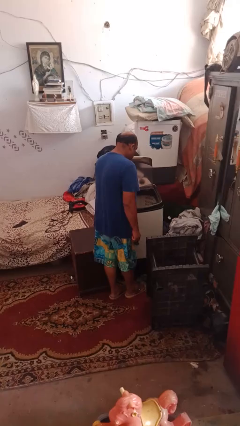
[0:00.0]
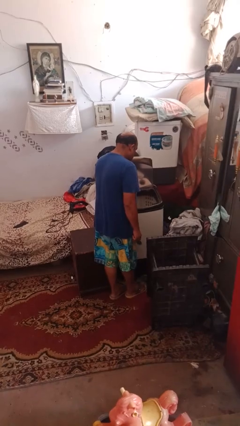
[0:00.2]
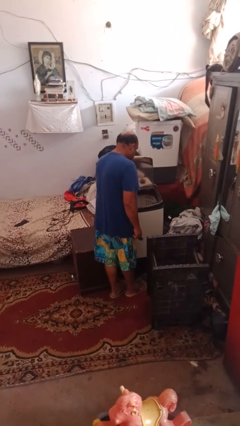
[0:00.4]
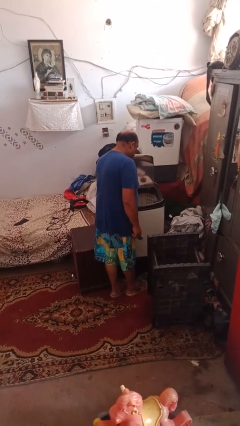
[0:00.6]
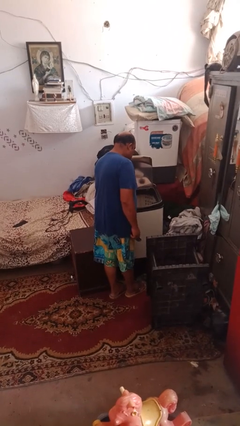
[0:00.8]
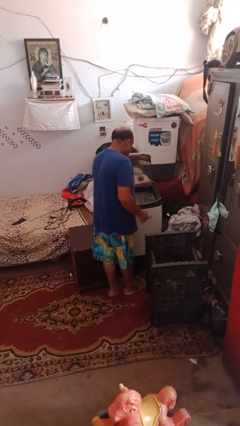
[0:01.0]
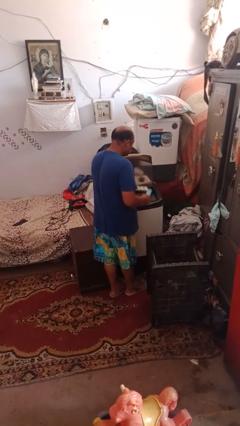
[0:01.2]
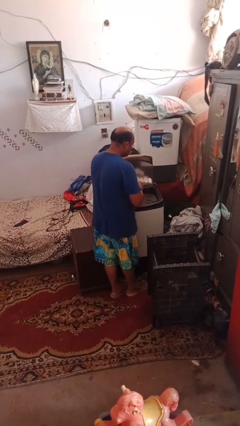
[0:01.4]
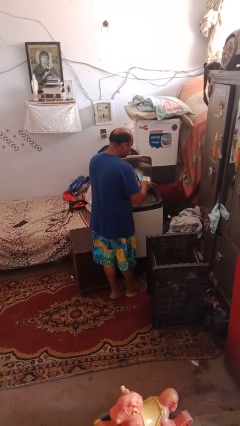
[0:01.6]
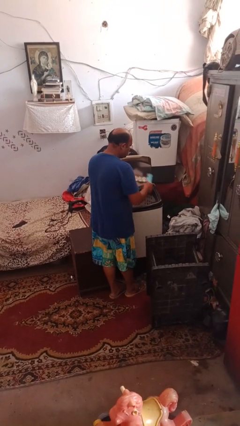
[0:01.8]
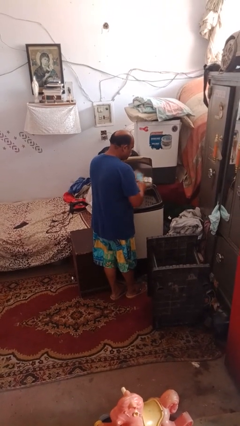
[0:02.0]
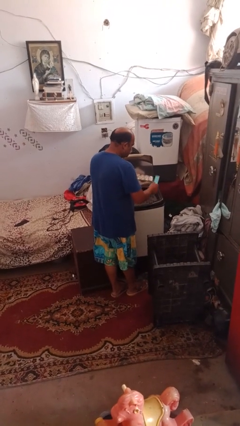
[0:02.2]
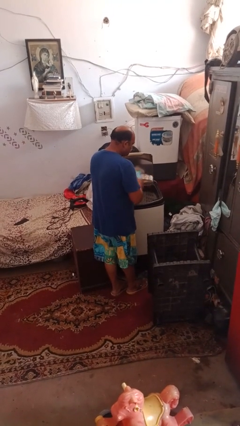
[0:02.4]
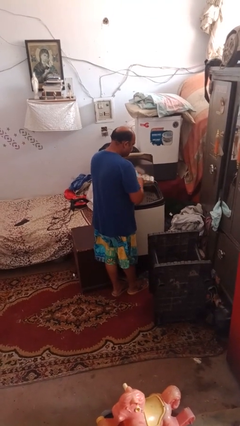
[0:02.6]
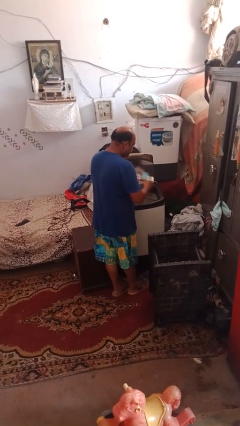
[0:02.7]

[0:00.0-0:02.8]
person cleans dryer lint trap

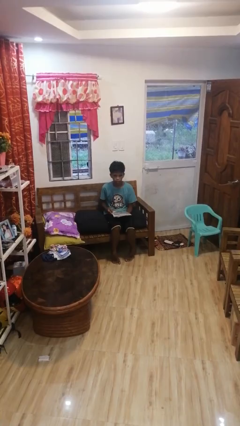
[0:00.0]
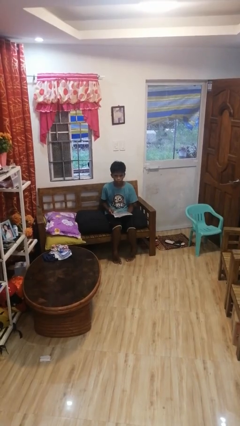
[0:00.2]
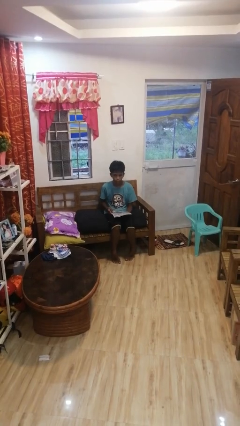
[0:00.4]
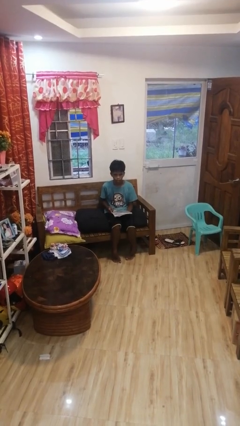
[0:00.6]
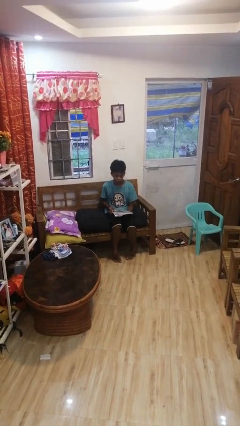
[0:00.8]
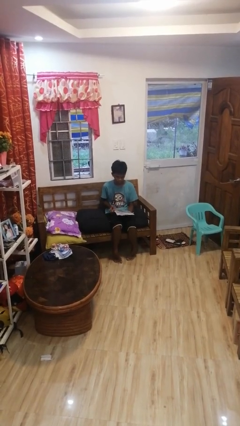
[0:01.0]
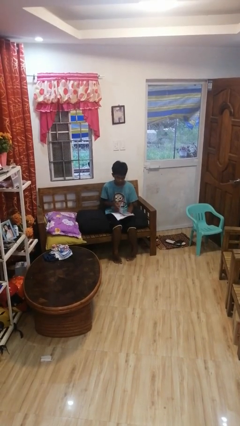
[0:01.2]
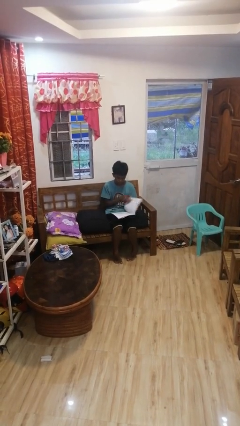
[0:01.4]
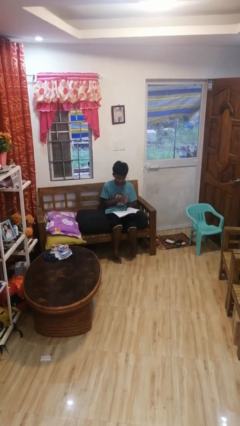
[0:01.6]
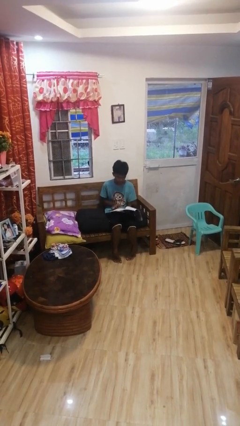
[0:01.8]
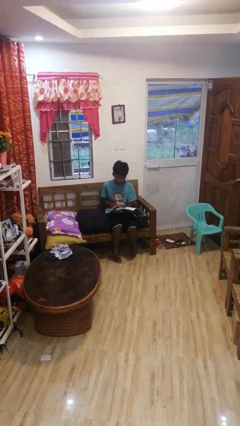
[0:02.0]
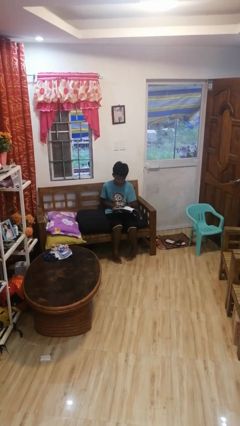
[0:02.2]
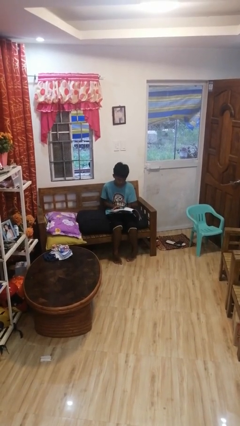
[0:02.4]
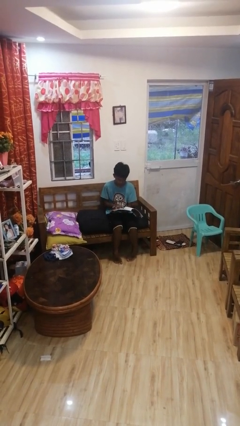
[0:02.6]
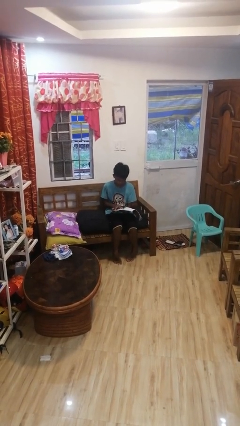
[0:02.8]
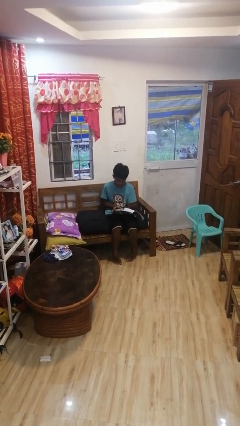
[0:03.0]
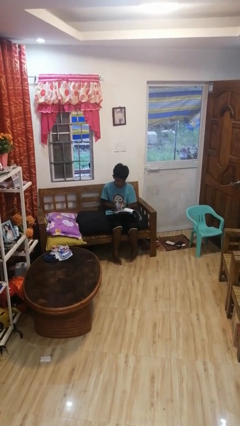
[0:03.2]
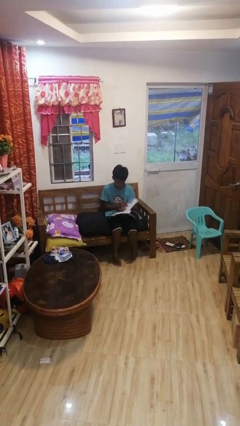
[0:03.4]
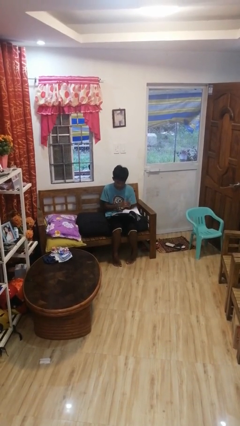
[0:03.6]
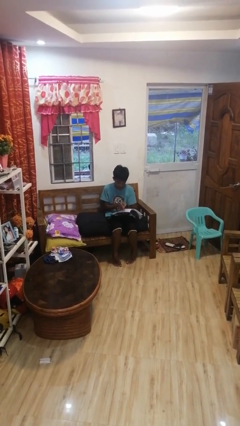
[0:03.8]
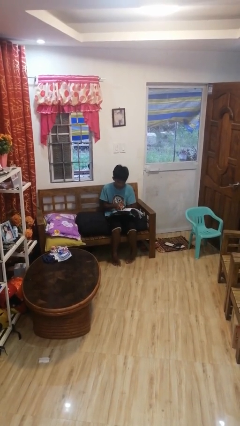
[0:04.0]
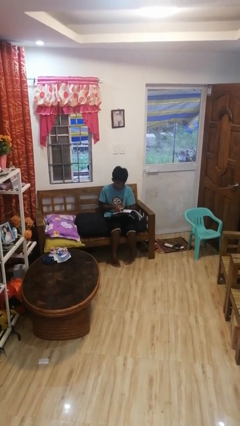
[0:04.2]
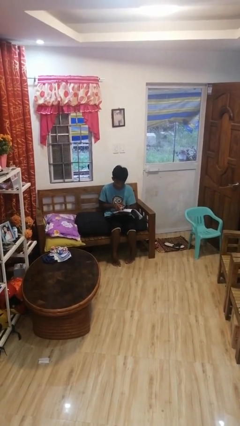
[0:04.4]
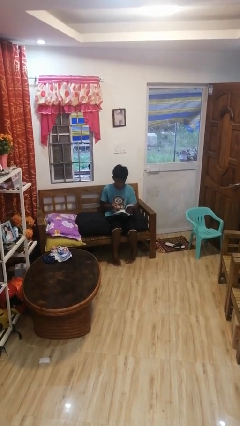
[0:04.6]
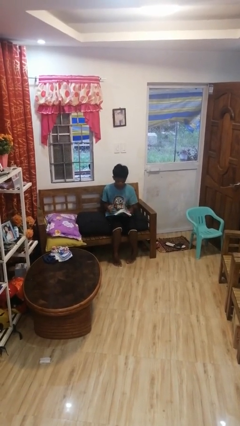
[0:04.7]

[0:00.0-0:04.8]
person reads magazine

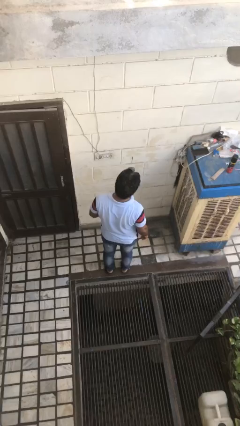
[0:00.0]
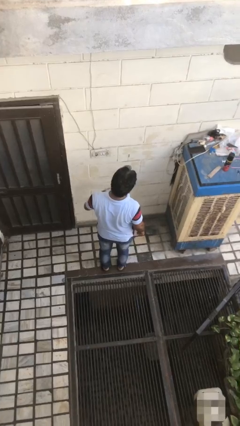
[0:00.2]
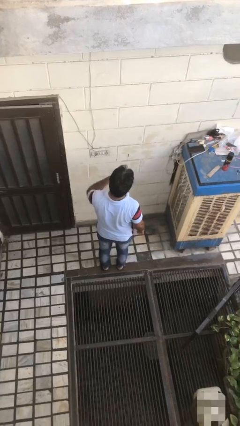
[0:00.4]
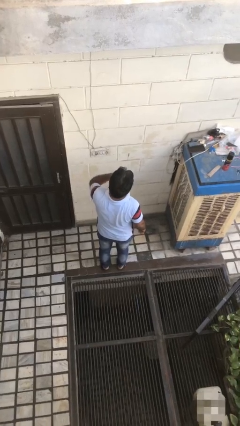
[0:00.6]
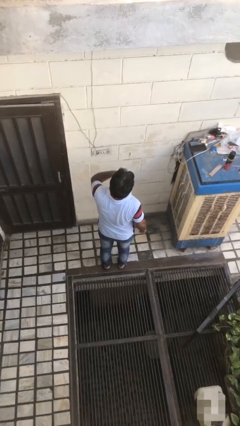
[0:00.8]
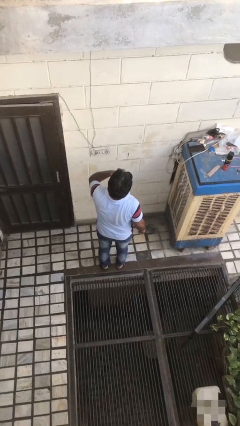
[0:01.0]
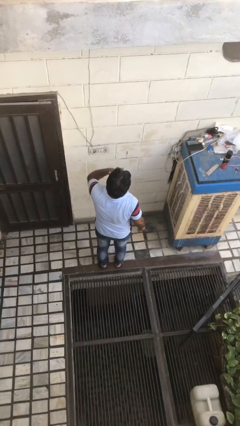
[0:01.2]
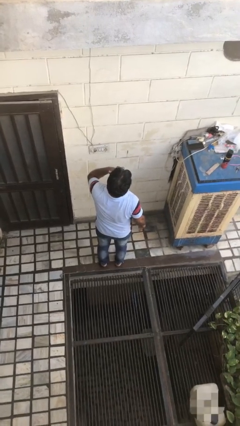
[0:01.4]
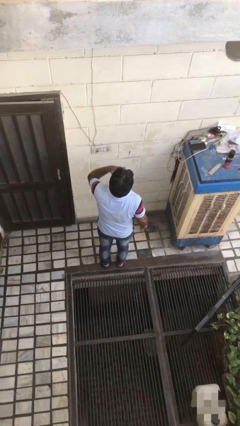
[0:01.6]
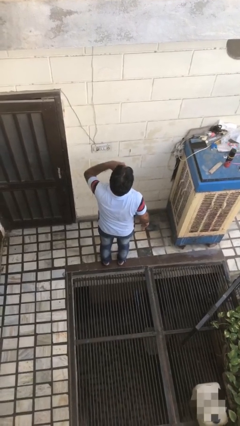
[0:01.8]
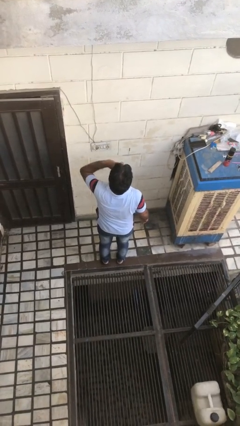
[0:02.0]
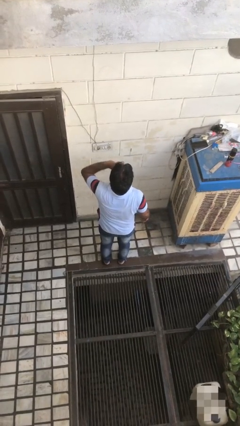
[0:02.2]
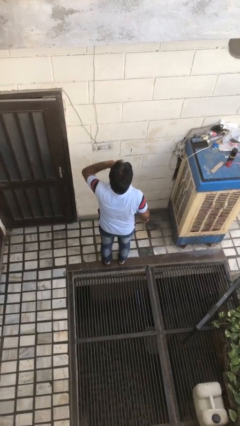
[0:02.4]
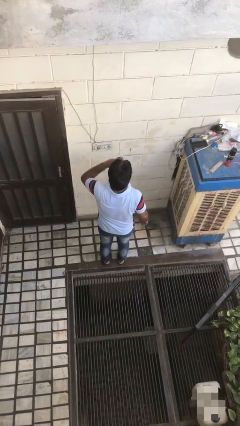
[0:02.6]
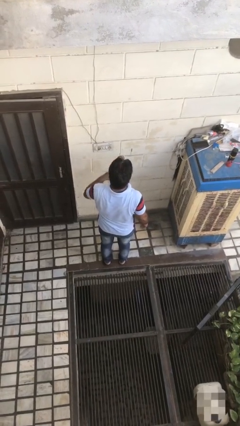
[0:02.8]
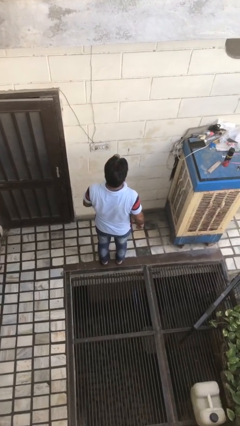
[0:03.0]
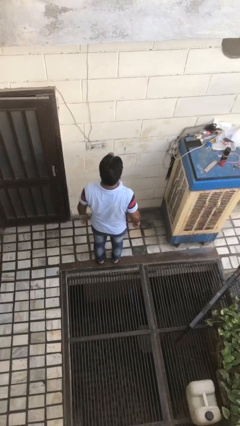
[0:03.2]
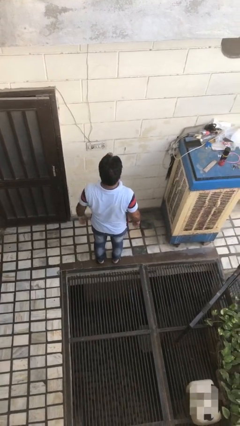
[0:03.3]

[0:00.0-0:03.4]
person yawns

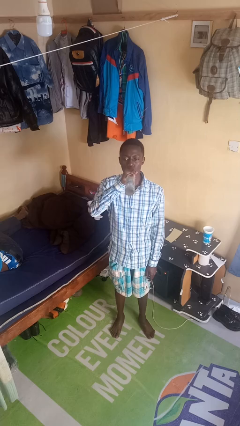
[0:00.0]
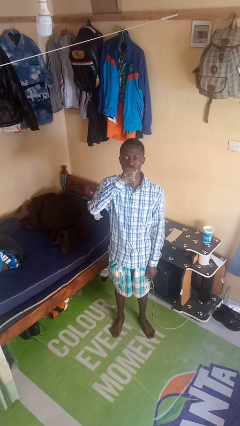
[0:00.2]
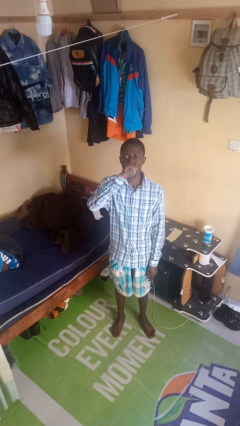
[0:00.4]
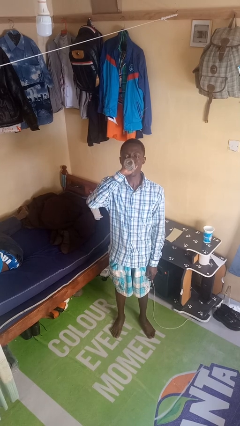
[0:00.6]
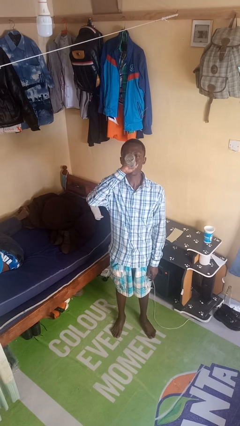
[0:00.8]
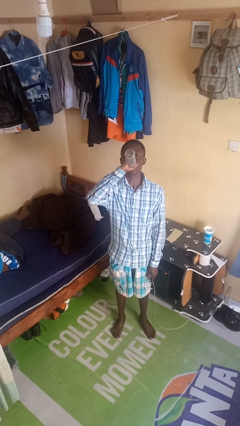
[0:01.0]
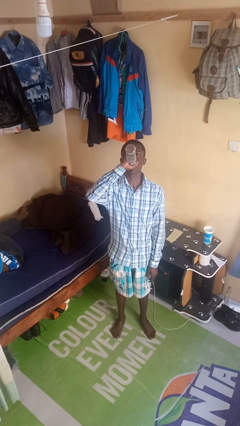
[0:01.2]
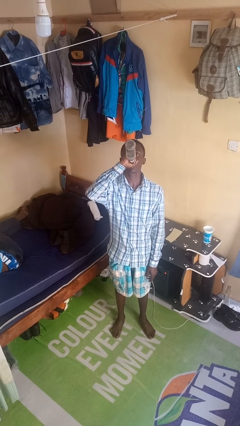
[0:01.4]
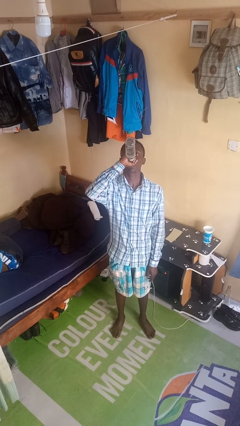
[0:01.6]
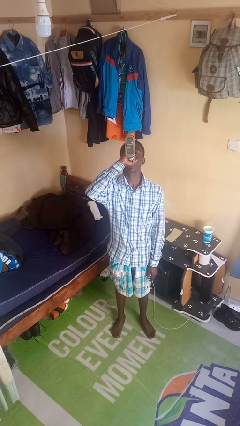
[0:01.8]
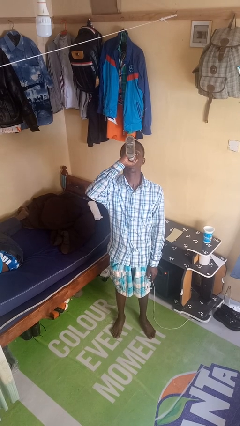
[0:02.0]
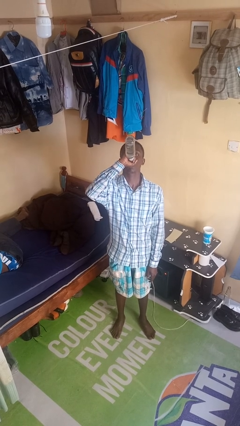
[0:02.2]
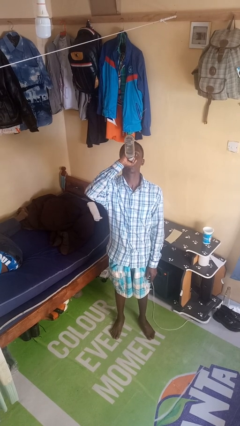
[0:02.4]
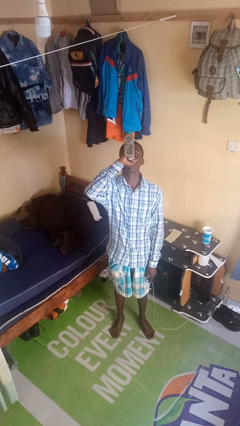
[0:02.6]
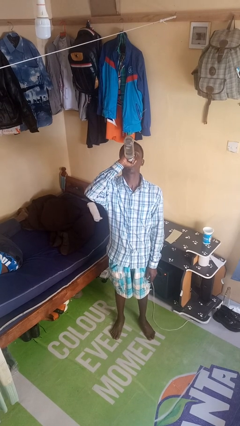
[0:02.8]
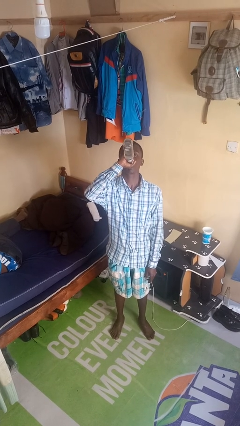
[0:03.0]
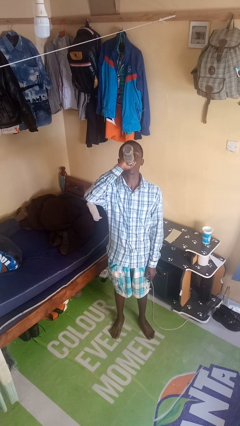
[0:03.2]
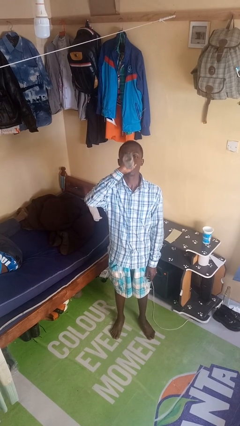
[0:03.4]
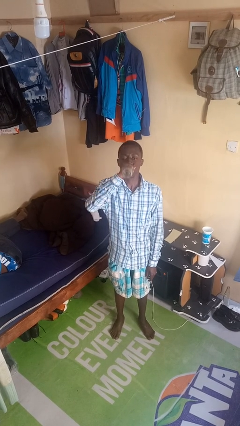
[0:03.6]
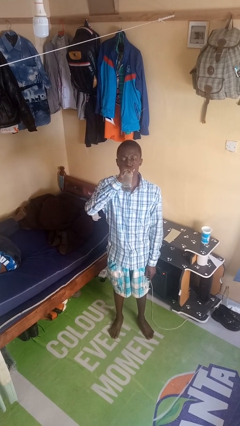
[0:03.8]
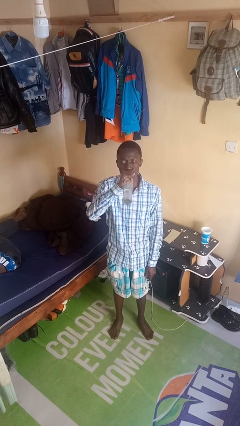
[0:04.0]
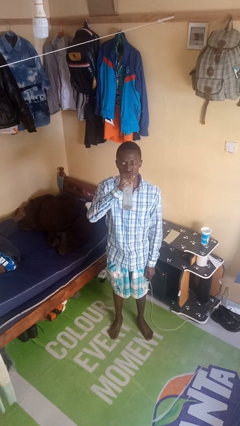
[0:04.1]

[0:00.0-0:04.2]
person drinks from bottle

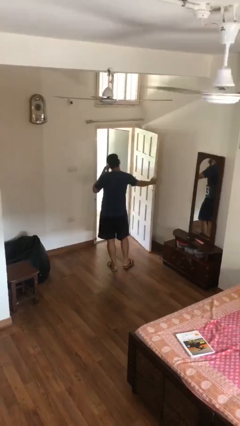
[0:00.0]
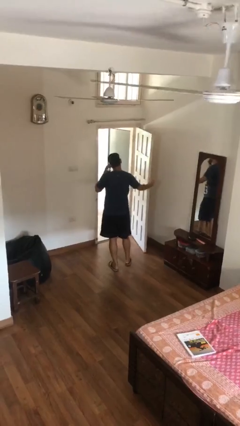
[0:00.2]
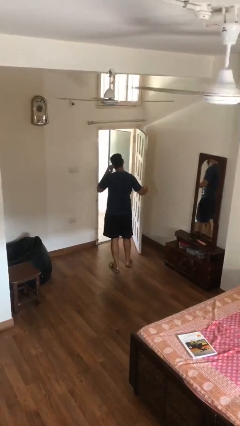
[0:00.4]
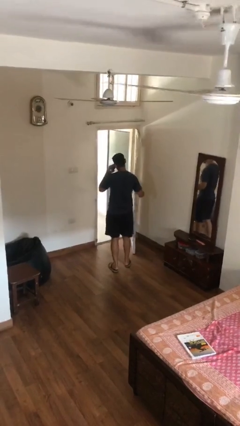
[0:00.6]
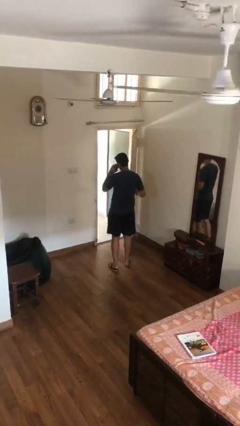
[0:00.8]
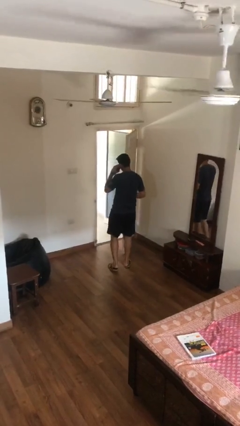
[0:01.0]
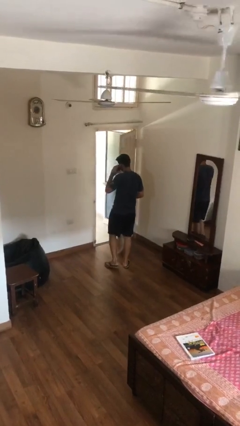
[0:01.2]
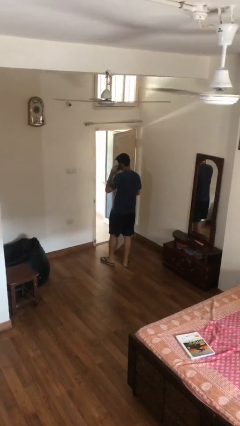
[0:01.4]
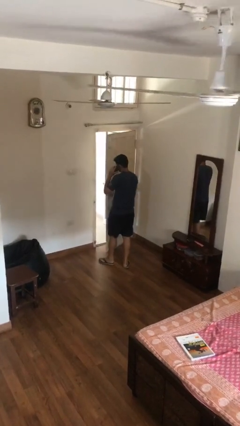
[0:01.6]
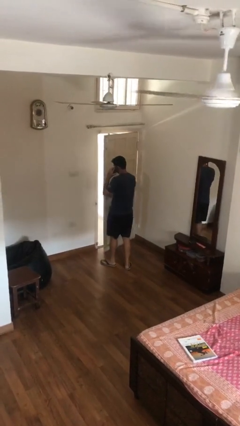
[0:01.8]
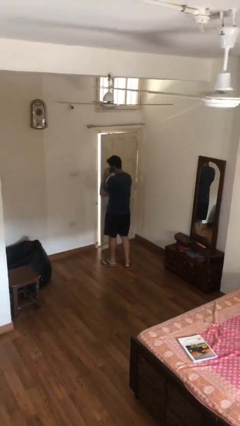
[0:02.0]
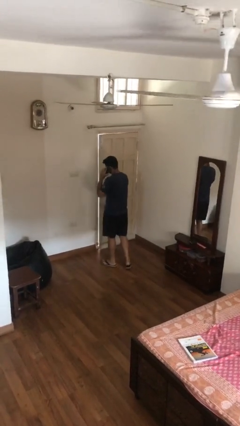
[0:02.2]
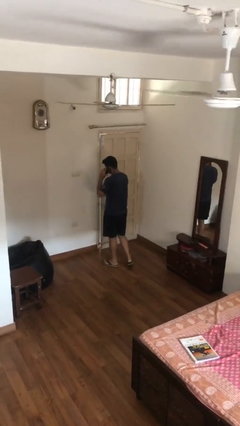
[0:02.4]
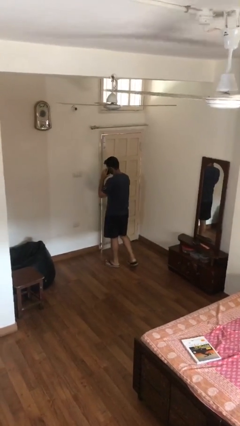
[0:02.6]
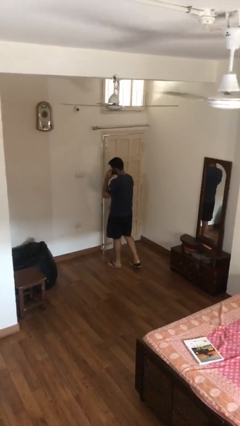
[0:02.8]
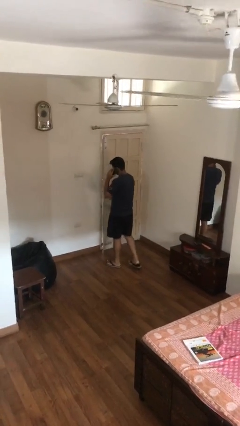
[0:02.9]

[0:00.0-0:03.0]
person closes facility door
